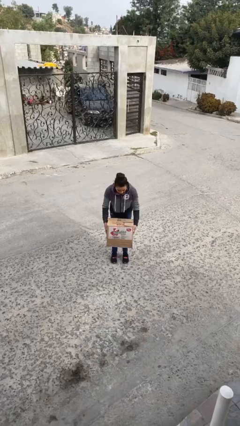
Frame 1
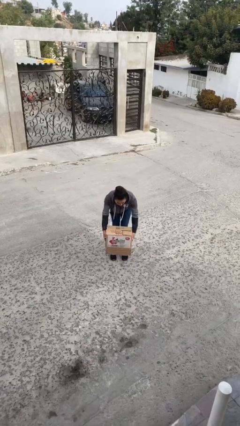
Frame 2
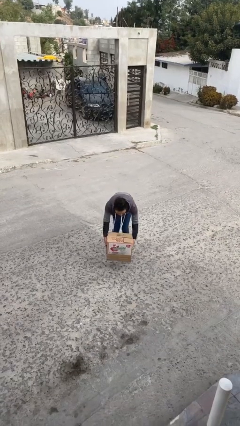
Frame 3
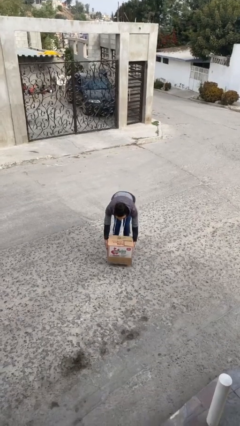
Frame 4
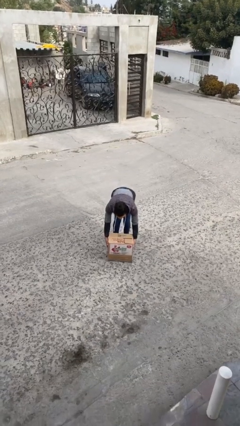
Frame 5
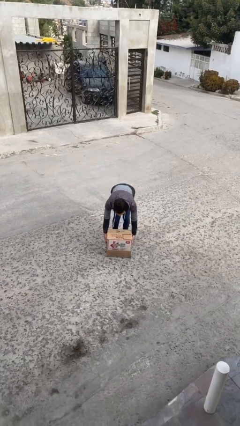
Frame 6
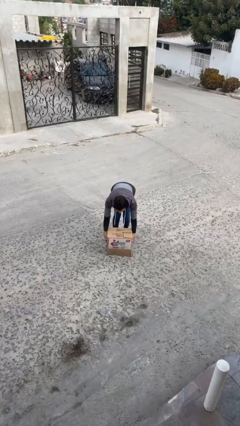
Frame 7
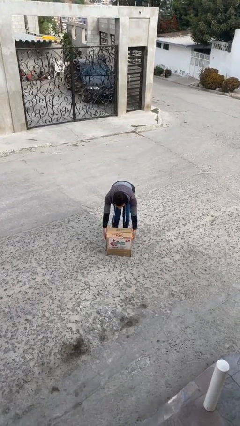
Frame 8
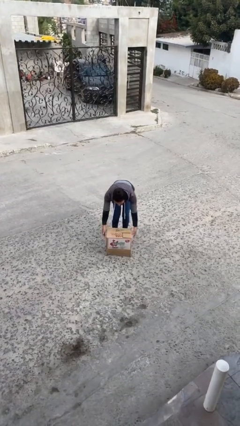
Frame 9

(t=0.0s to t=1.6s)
person puts down object on floor

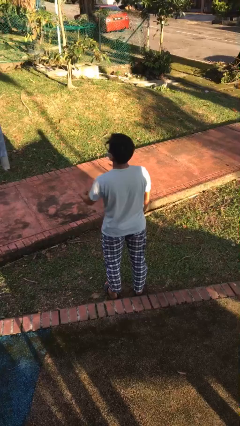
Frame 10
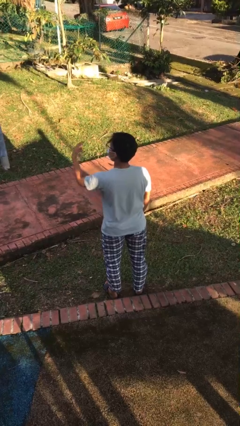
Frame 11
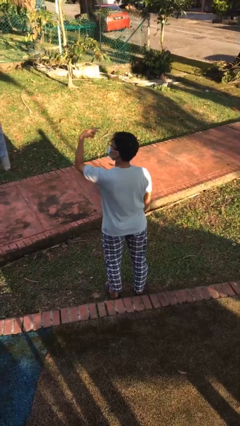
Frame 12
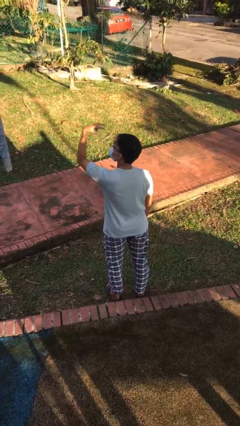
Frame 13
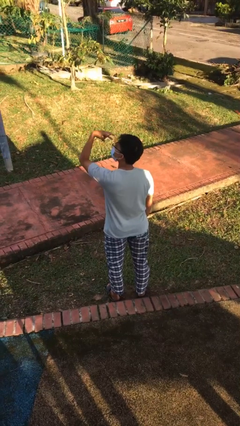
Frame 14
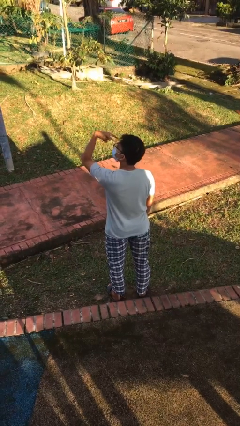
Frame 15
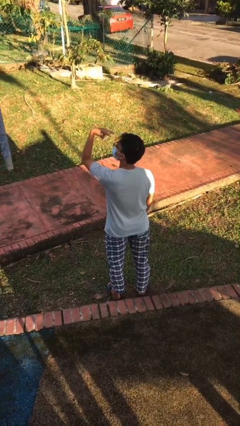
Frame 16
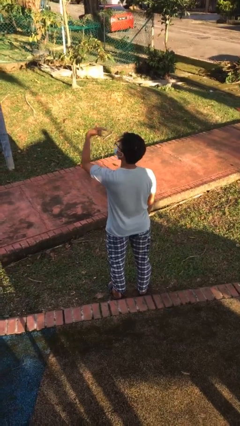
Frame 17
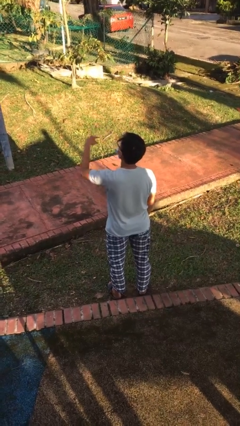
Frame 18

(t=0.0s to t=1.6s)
person gestures watch closely

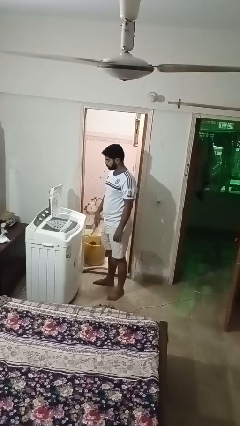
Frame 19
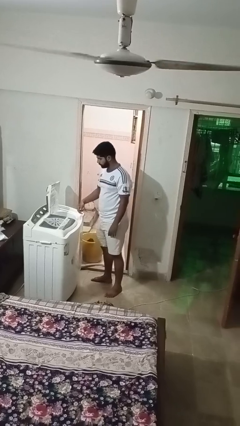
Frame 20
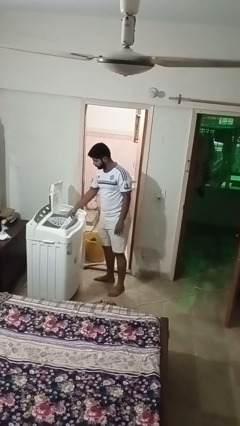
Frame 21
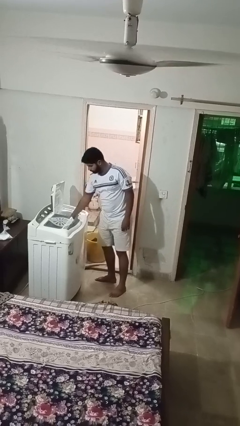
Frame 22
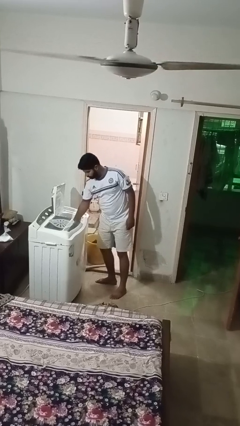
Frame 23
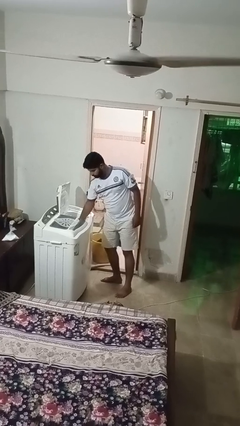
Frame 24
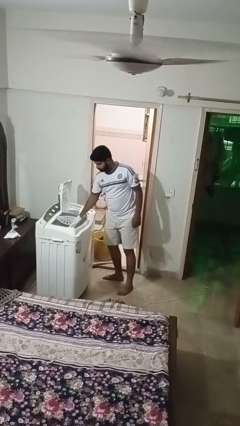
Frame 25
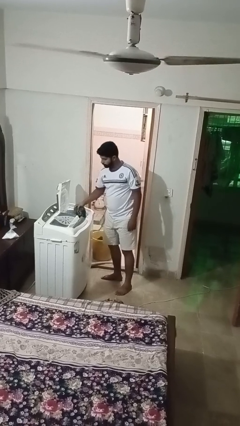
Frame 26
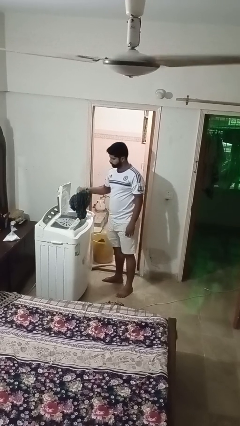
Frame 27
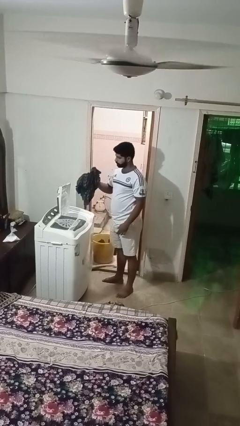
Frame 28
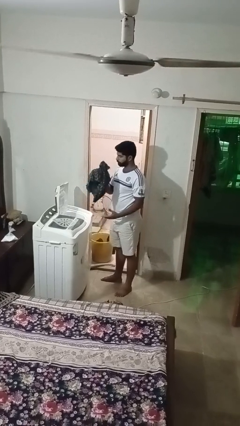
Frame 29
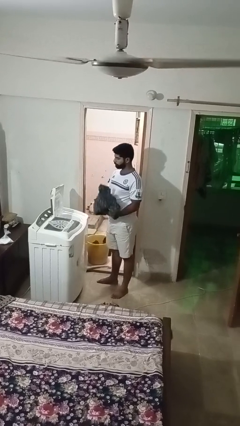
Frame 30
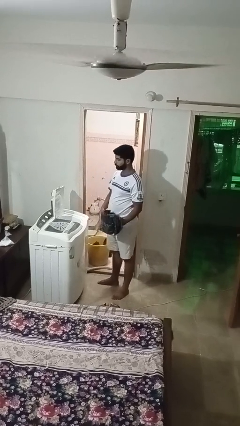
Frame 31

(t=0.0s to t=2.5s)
person unloads dryer

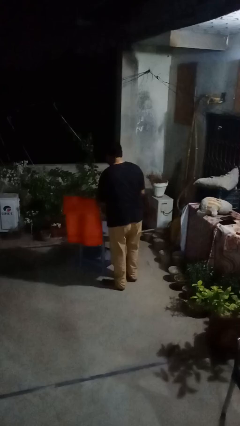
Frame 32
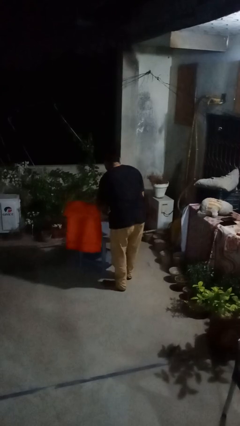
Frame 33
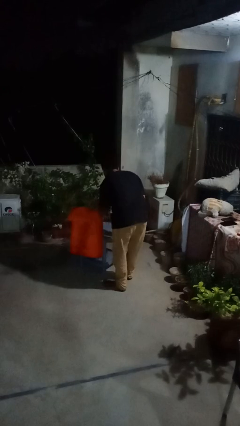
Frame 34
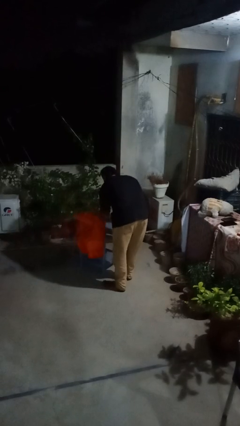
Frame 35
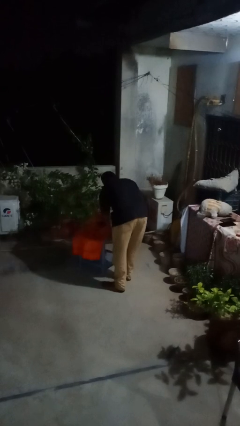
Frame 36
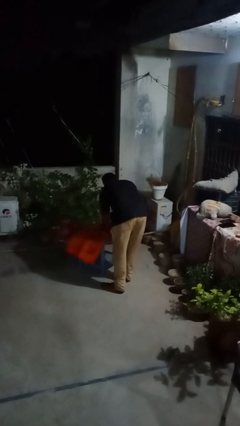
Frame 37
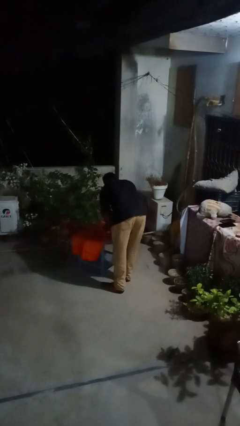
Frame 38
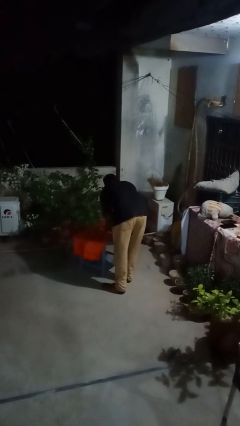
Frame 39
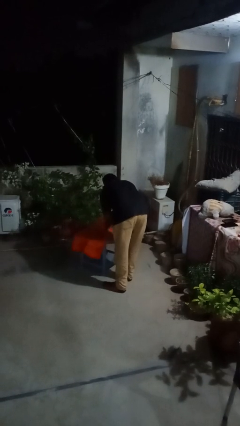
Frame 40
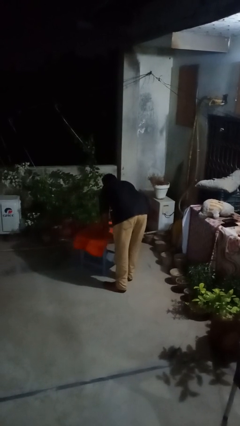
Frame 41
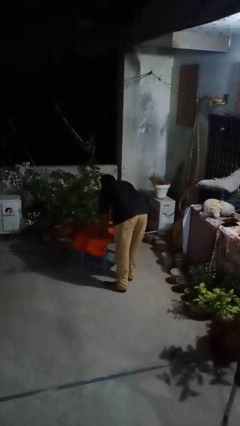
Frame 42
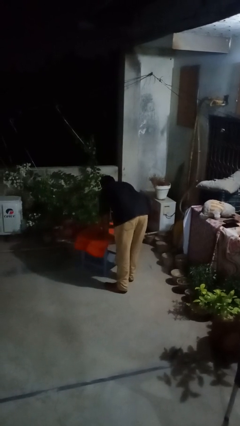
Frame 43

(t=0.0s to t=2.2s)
person spreads tablecloth

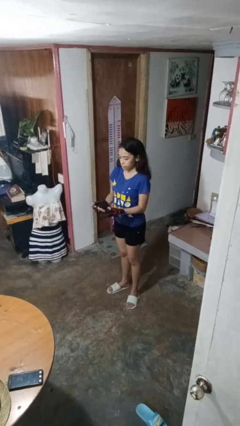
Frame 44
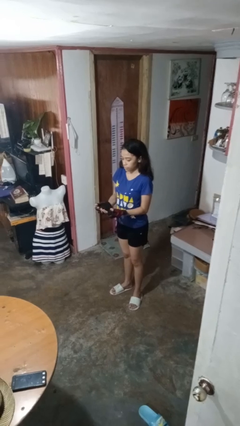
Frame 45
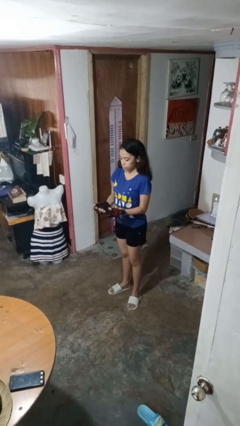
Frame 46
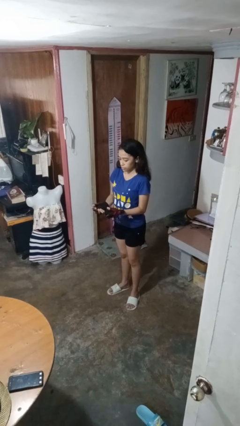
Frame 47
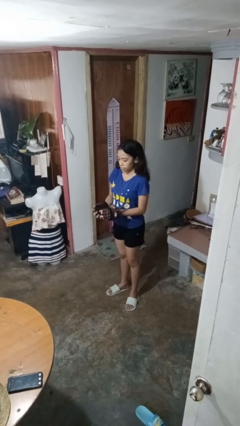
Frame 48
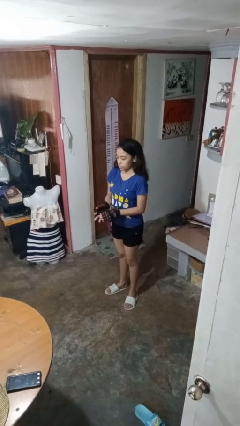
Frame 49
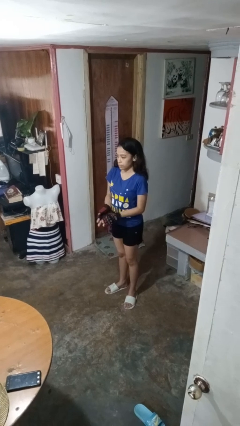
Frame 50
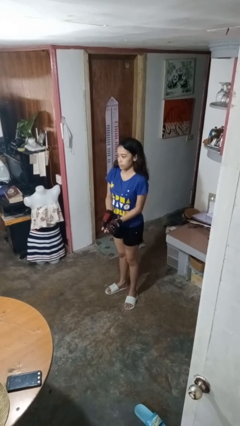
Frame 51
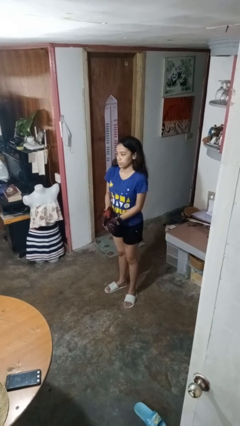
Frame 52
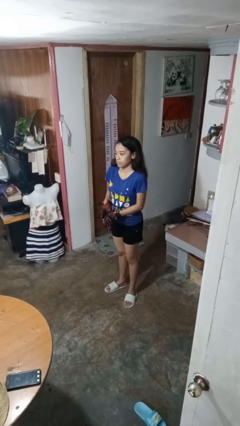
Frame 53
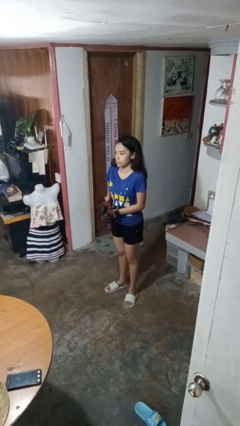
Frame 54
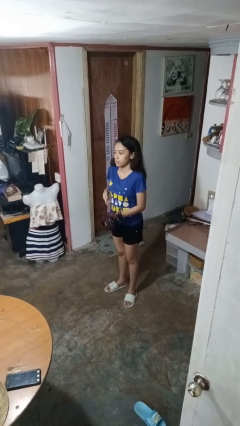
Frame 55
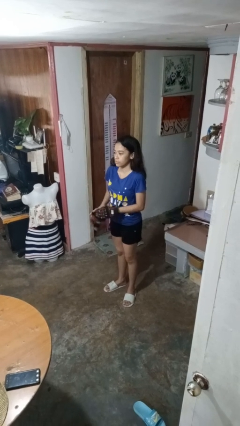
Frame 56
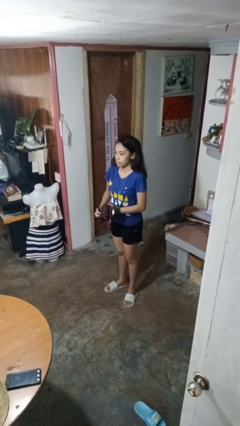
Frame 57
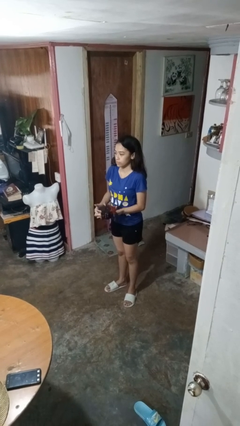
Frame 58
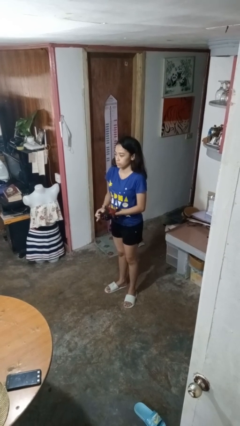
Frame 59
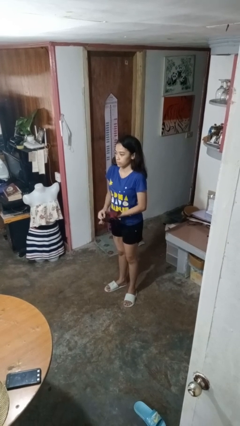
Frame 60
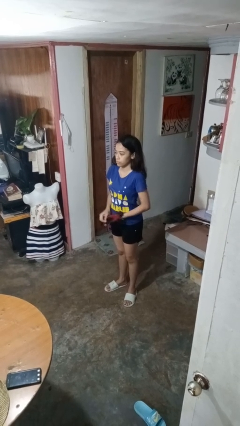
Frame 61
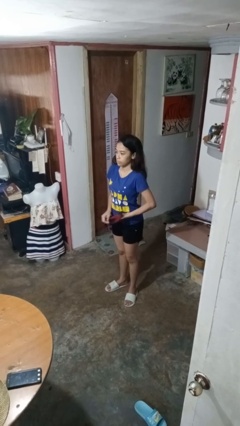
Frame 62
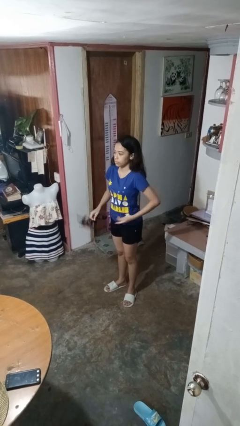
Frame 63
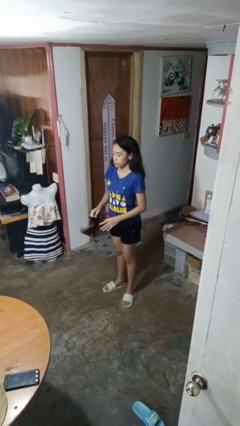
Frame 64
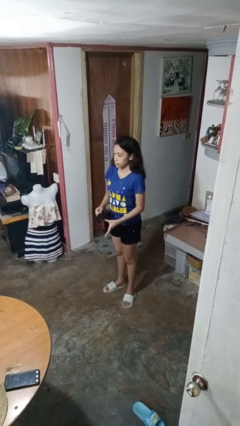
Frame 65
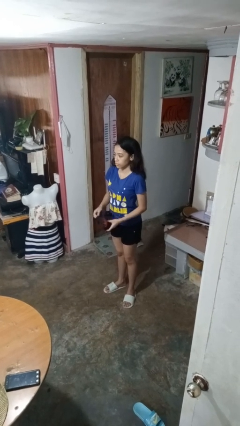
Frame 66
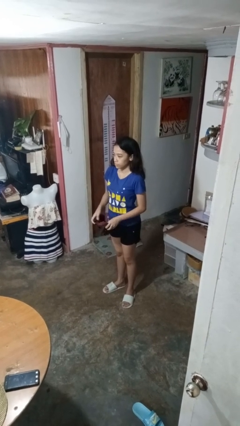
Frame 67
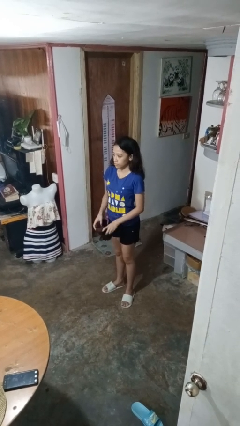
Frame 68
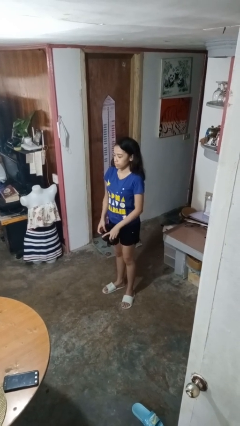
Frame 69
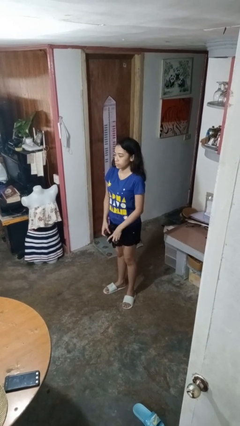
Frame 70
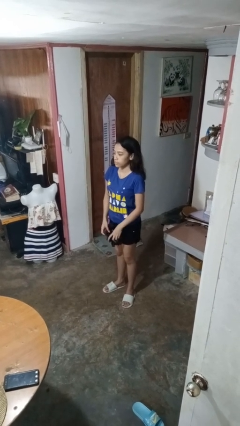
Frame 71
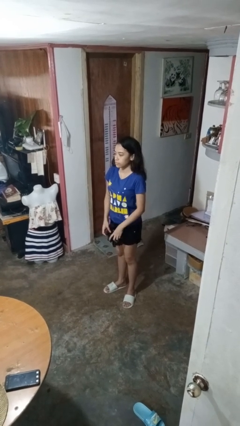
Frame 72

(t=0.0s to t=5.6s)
person takes off gloves

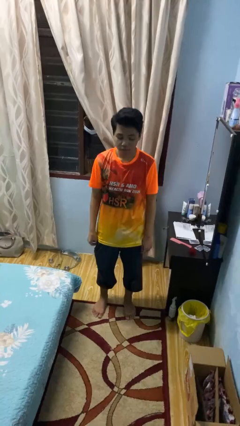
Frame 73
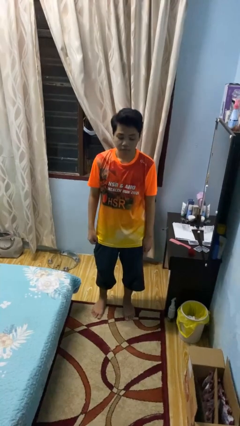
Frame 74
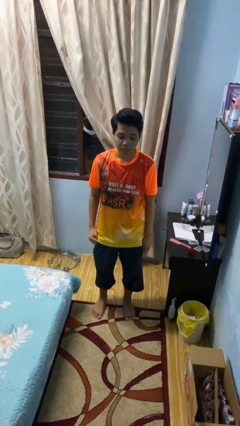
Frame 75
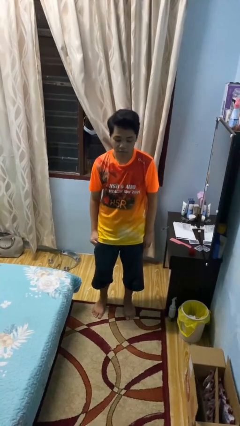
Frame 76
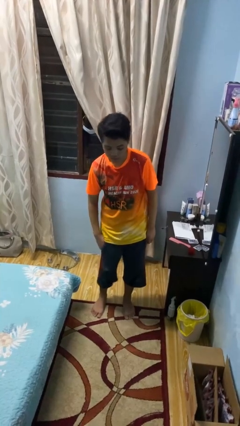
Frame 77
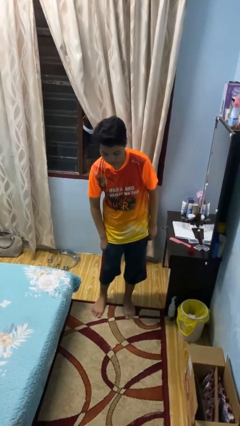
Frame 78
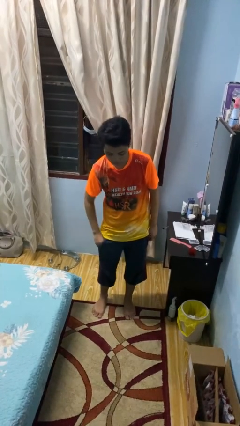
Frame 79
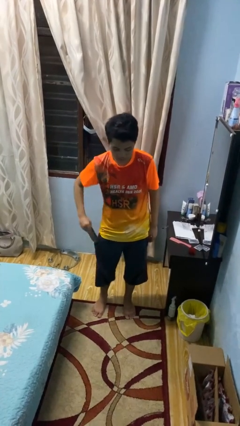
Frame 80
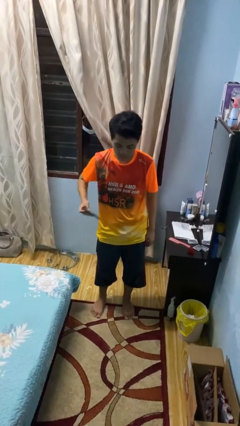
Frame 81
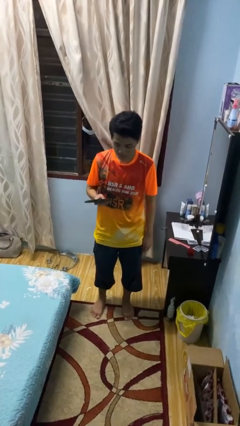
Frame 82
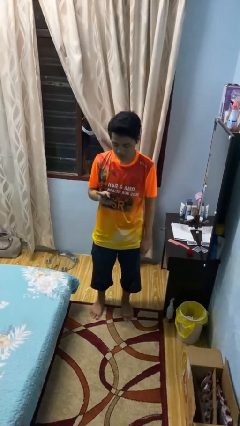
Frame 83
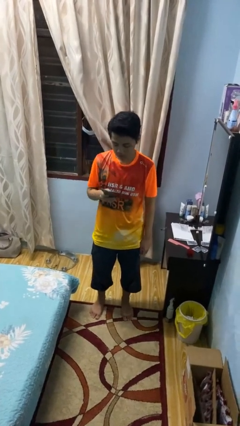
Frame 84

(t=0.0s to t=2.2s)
person takes phone from pocket

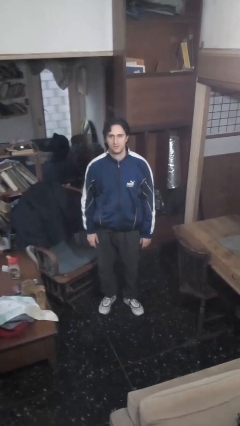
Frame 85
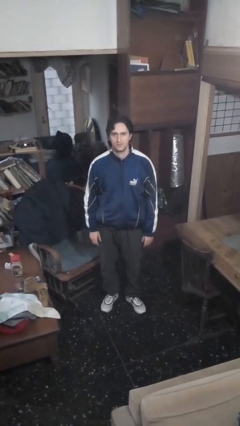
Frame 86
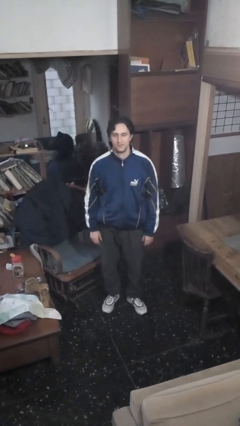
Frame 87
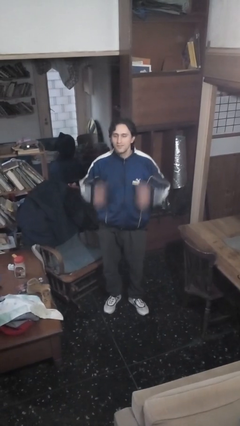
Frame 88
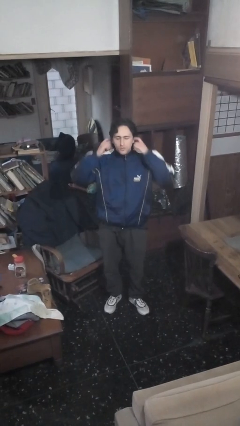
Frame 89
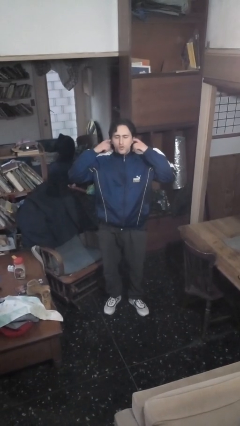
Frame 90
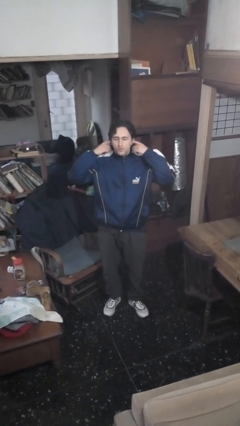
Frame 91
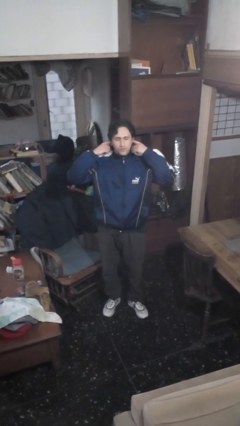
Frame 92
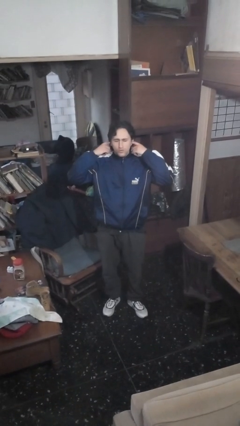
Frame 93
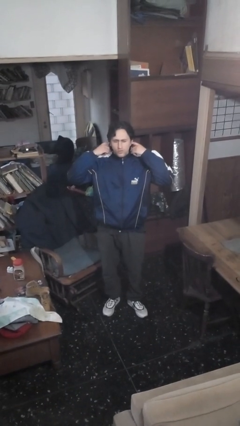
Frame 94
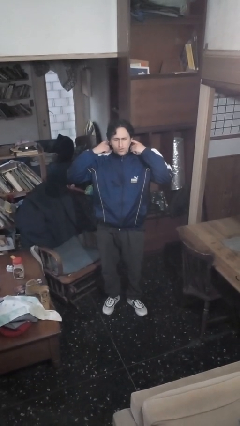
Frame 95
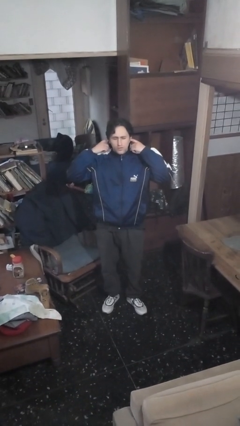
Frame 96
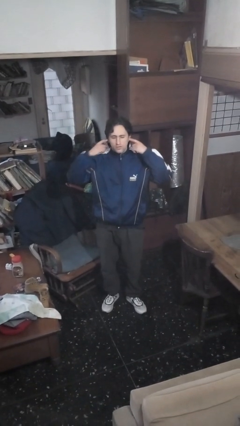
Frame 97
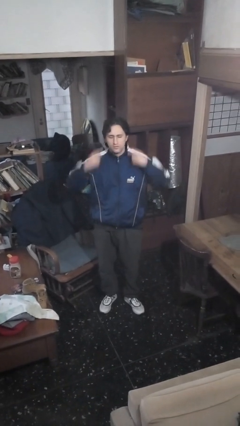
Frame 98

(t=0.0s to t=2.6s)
person puts fingers in ear
